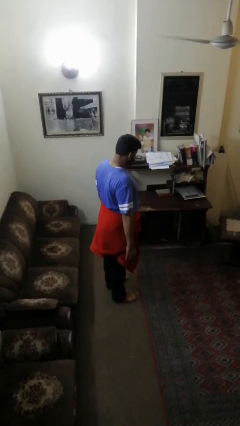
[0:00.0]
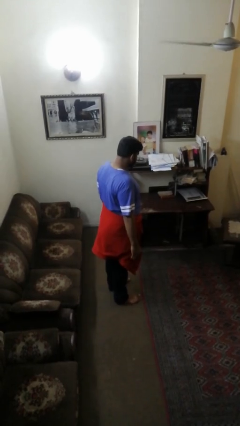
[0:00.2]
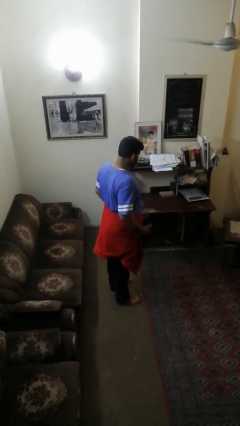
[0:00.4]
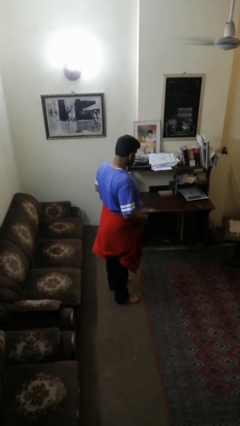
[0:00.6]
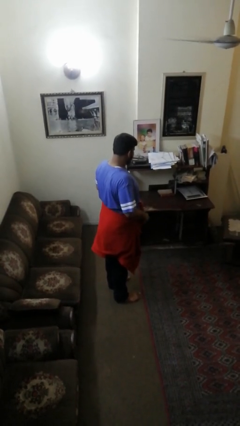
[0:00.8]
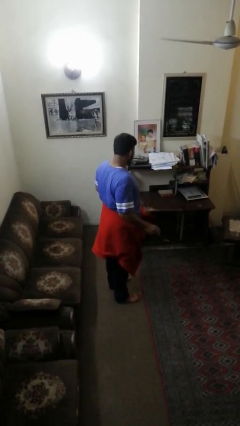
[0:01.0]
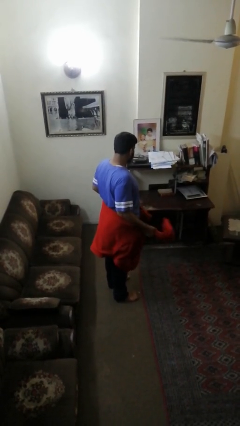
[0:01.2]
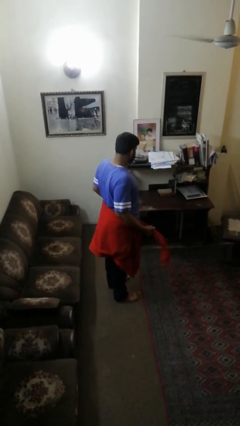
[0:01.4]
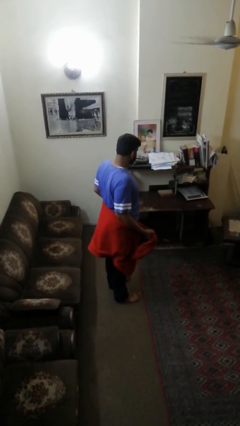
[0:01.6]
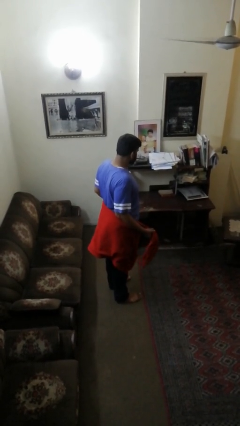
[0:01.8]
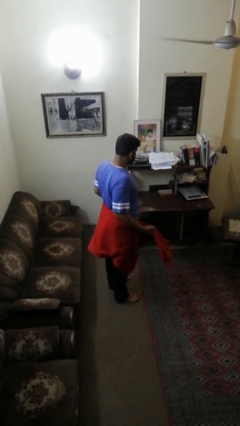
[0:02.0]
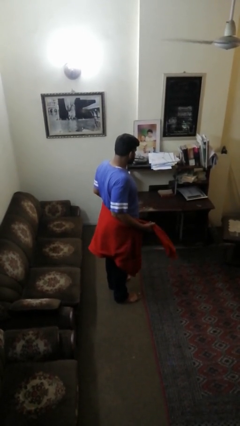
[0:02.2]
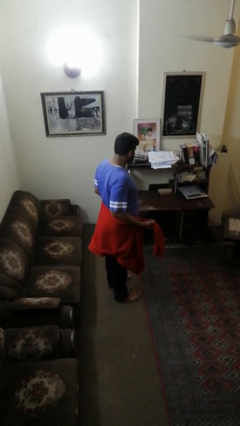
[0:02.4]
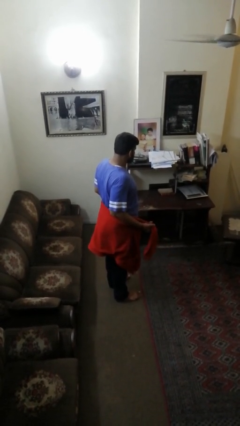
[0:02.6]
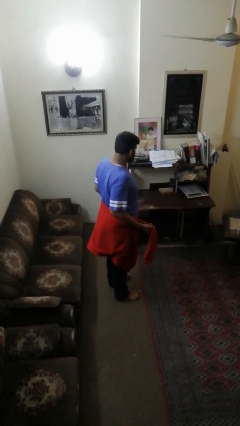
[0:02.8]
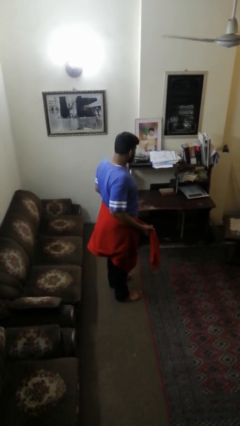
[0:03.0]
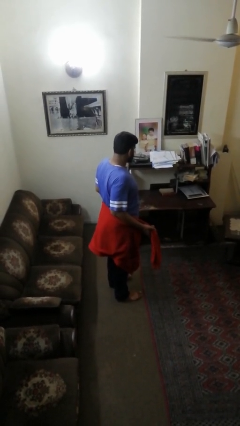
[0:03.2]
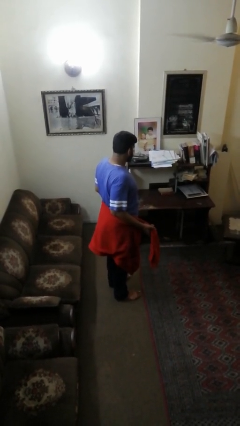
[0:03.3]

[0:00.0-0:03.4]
person unties jacket around waist

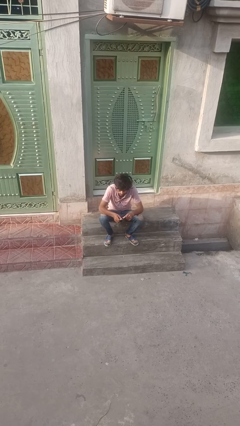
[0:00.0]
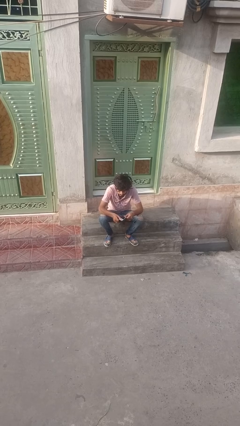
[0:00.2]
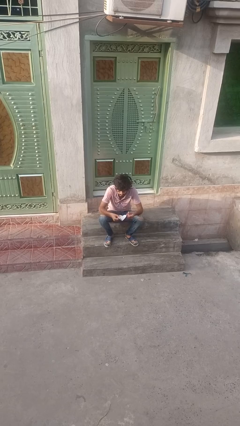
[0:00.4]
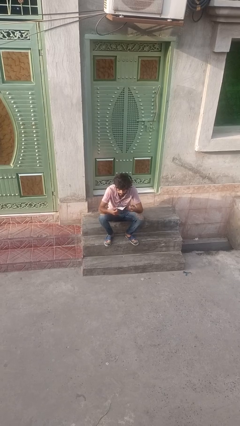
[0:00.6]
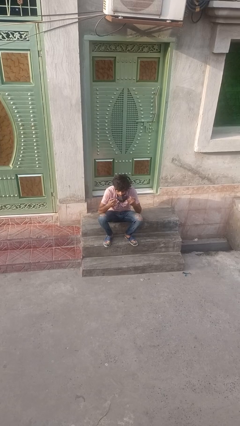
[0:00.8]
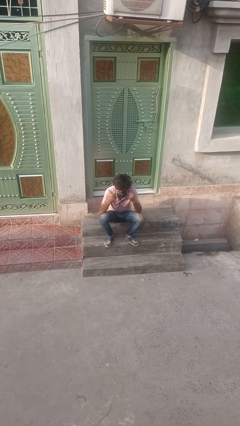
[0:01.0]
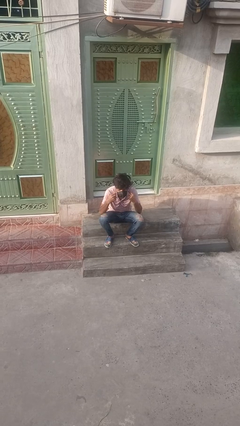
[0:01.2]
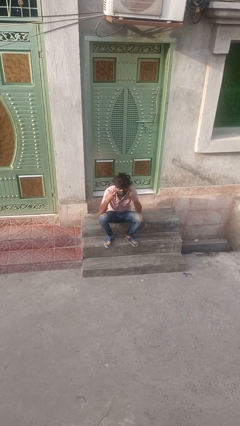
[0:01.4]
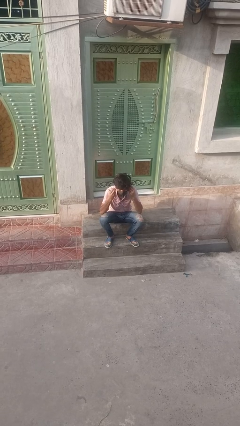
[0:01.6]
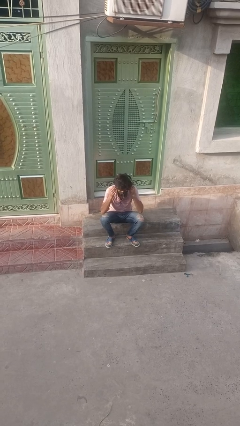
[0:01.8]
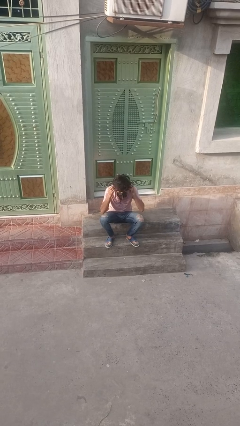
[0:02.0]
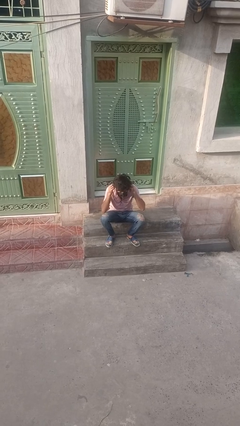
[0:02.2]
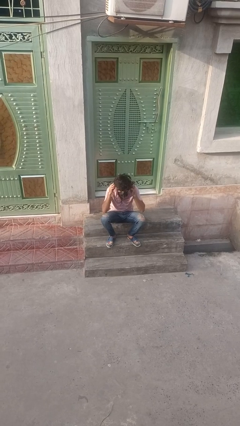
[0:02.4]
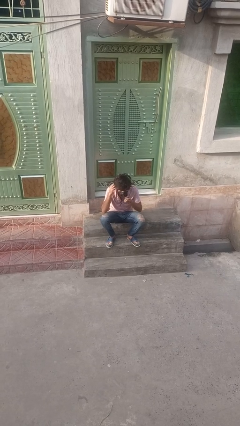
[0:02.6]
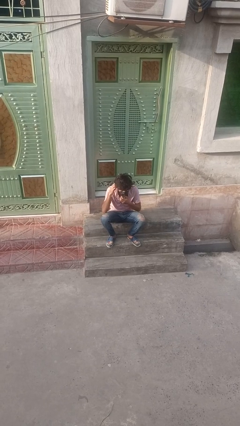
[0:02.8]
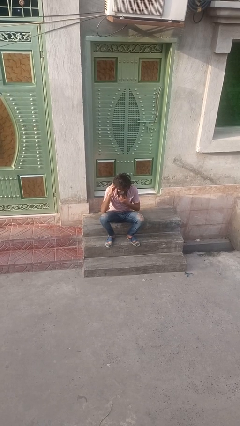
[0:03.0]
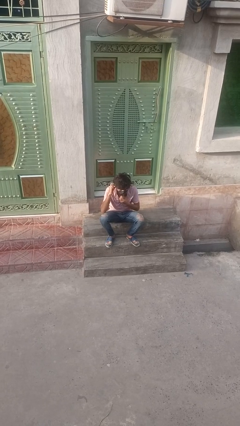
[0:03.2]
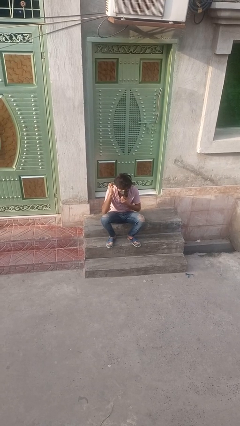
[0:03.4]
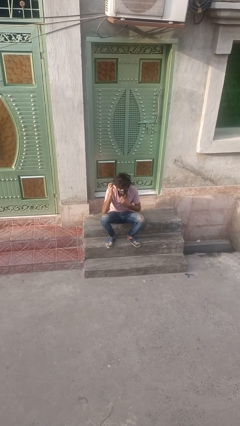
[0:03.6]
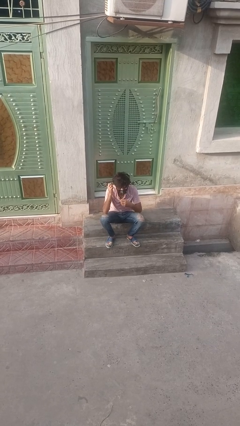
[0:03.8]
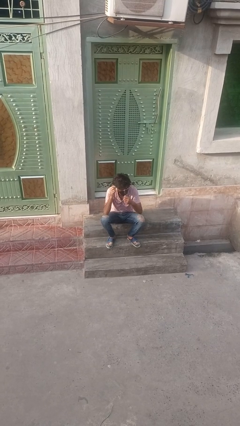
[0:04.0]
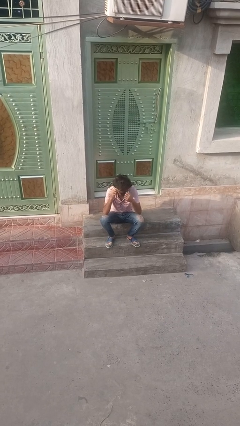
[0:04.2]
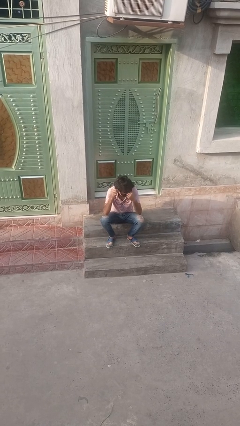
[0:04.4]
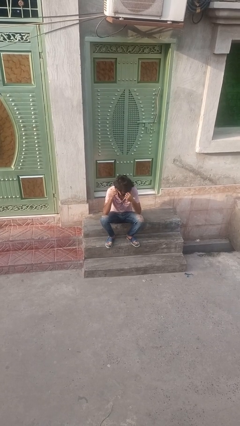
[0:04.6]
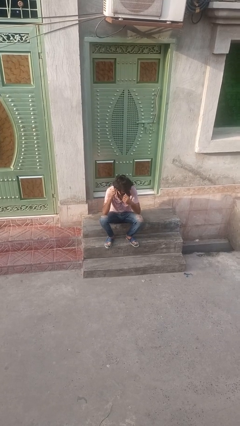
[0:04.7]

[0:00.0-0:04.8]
person puts on facemask

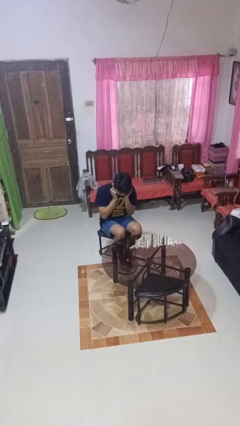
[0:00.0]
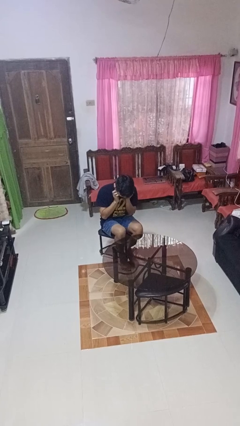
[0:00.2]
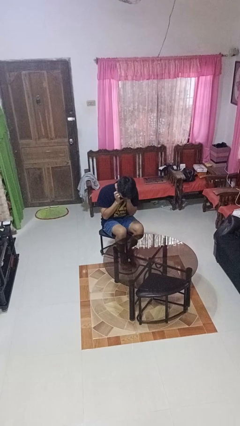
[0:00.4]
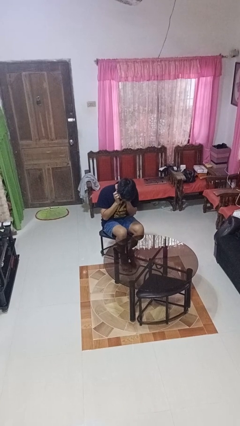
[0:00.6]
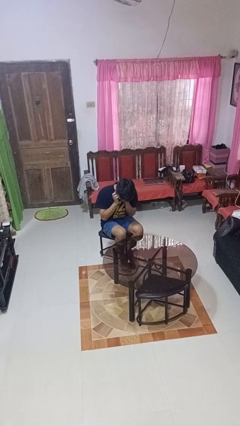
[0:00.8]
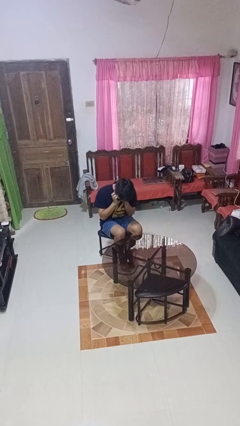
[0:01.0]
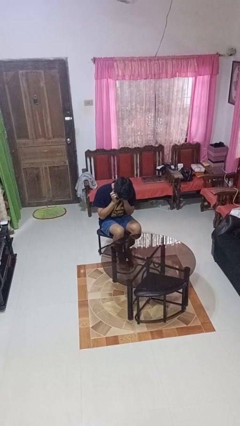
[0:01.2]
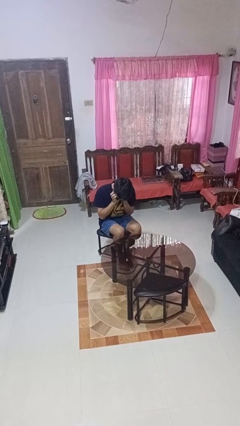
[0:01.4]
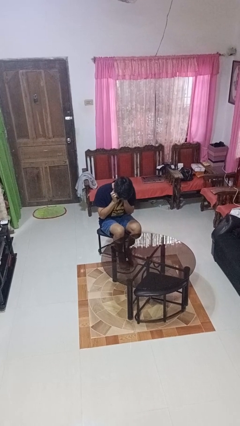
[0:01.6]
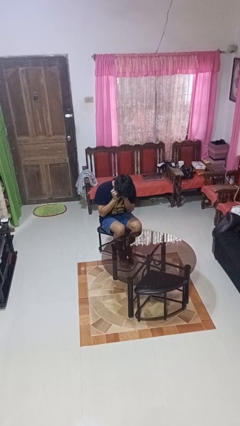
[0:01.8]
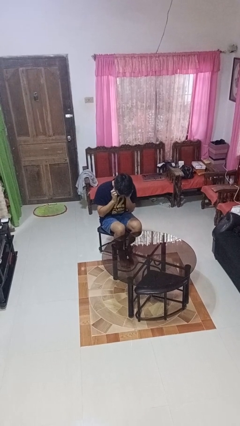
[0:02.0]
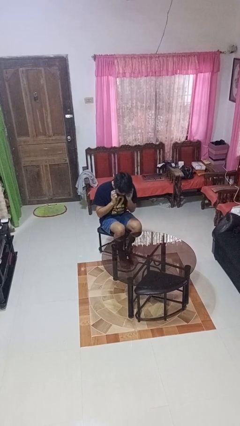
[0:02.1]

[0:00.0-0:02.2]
person puts fingers in ear

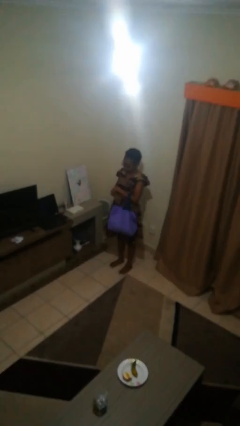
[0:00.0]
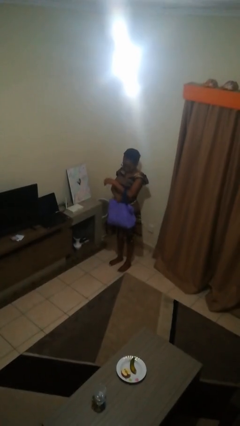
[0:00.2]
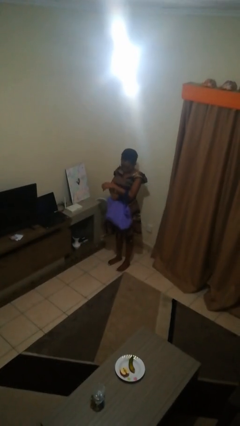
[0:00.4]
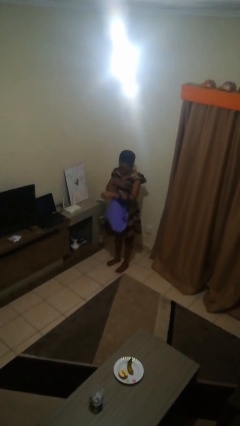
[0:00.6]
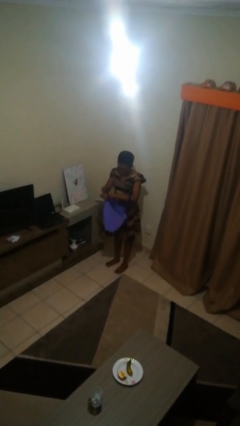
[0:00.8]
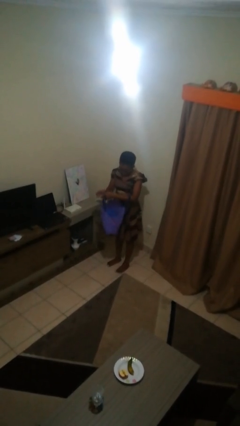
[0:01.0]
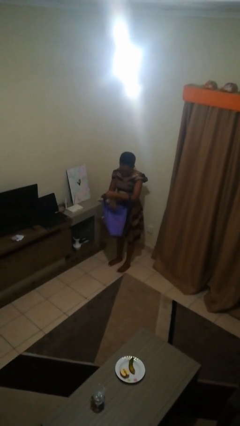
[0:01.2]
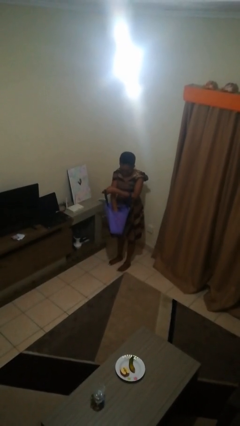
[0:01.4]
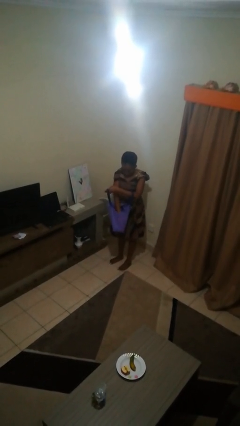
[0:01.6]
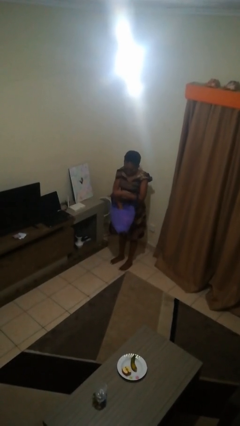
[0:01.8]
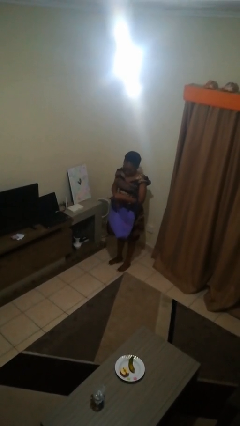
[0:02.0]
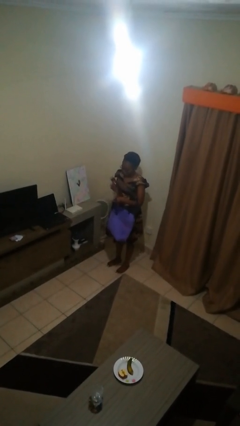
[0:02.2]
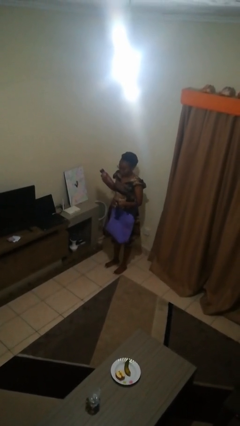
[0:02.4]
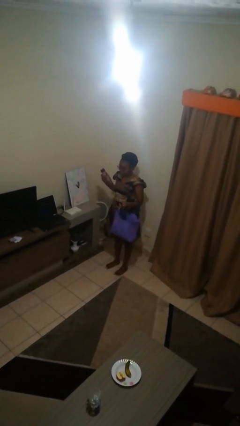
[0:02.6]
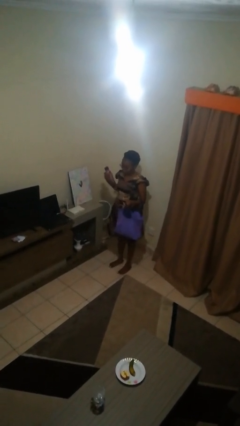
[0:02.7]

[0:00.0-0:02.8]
person takes object from bag

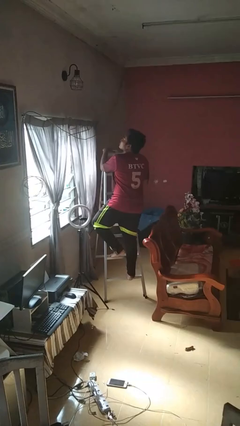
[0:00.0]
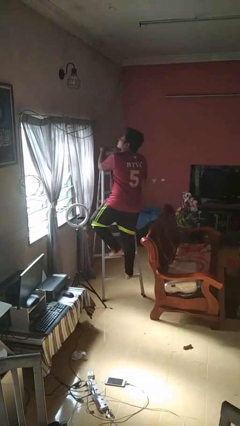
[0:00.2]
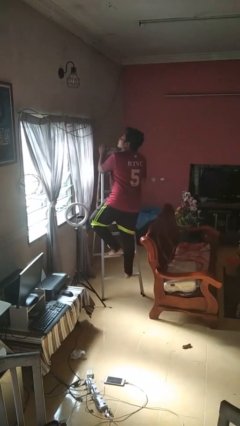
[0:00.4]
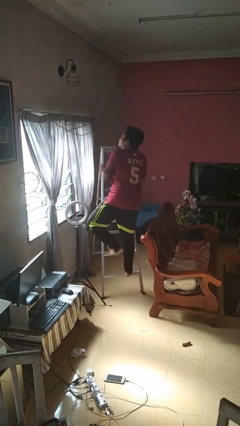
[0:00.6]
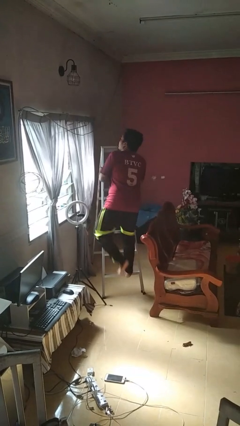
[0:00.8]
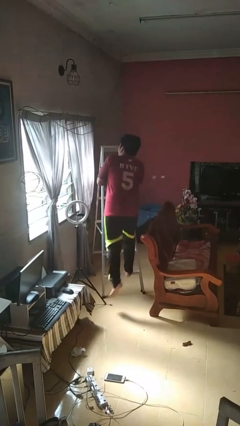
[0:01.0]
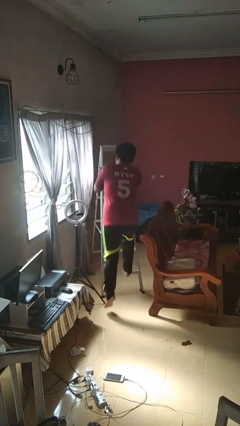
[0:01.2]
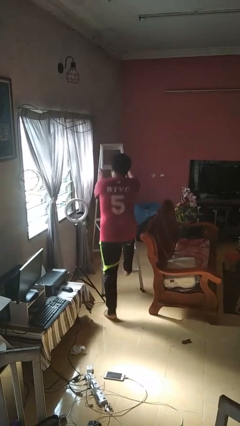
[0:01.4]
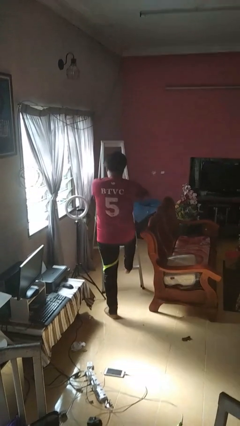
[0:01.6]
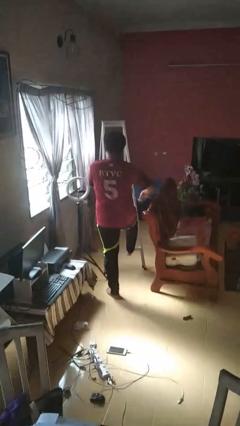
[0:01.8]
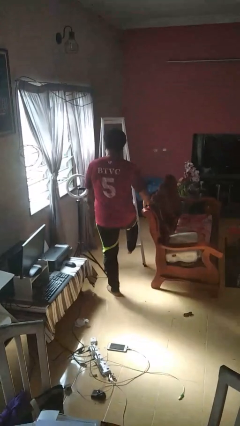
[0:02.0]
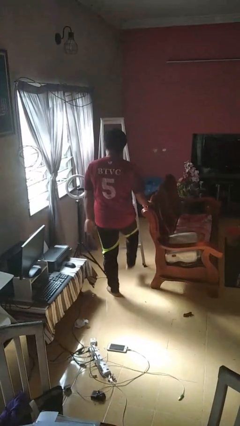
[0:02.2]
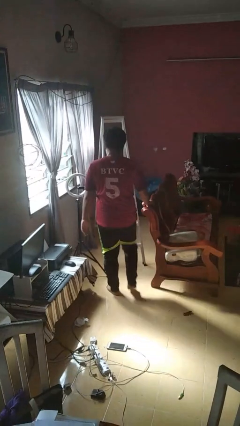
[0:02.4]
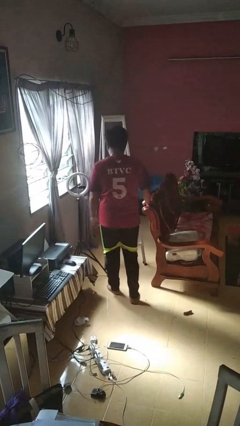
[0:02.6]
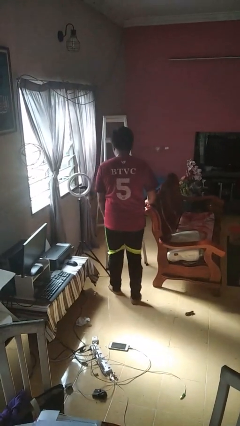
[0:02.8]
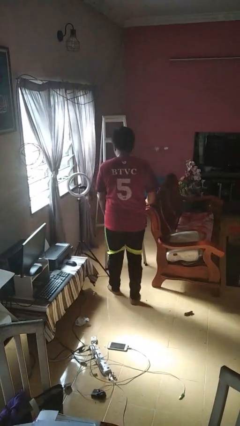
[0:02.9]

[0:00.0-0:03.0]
person climbs down ladder
